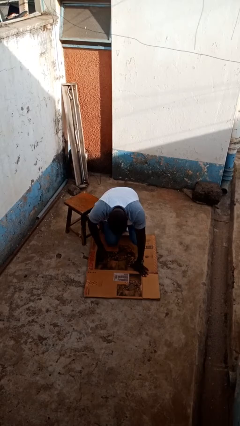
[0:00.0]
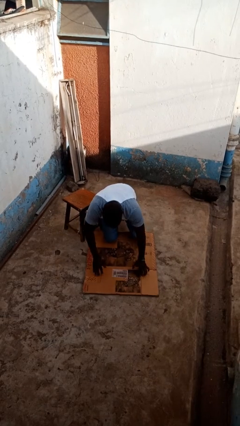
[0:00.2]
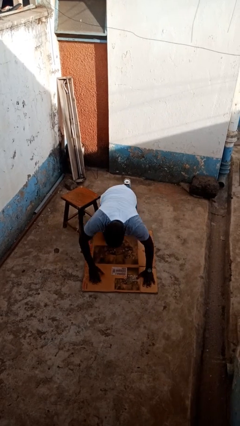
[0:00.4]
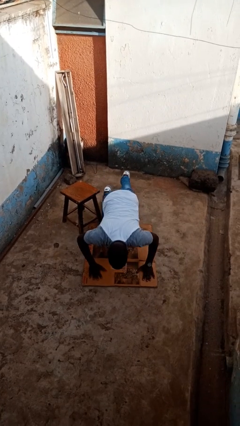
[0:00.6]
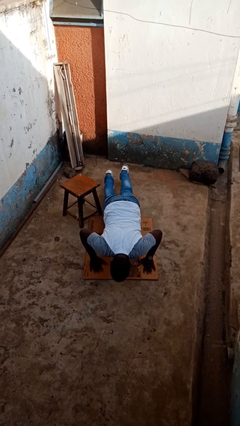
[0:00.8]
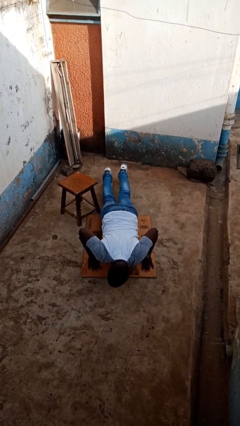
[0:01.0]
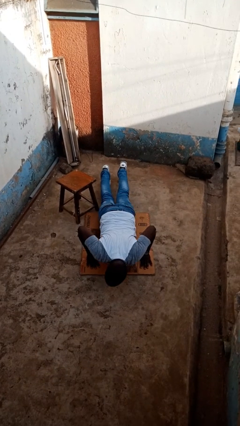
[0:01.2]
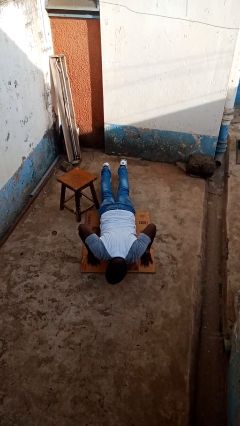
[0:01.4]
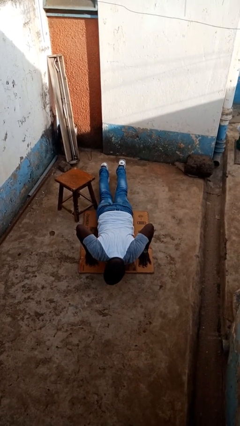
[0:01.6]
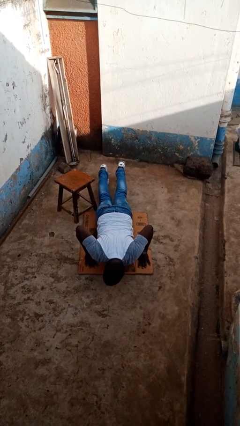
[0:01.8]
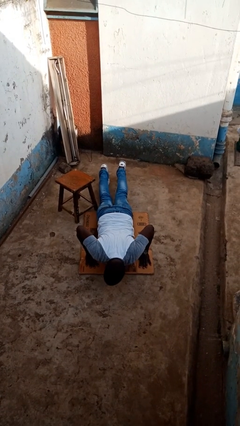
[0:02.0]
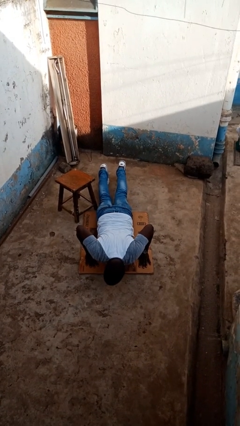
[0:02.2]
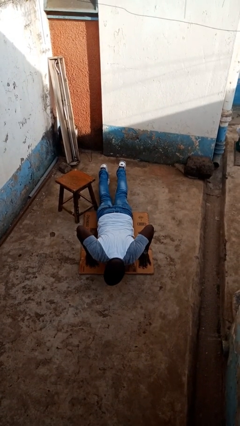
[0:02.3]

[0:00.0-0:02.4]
person lies down on floor

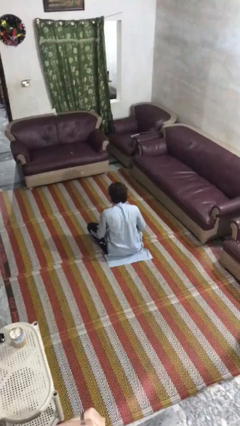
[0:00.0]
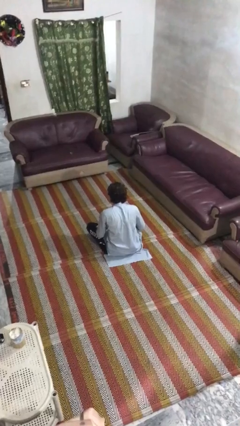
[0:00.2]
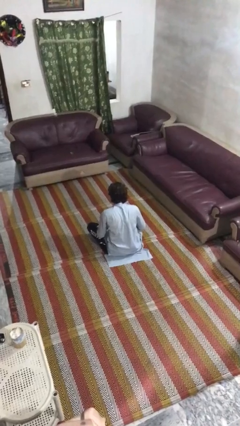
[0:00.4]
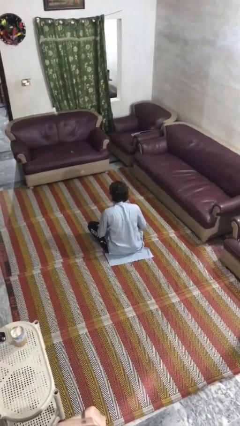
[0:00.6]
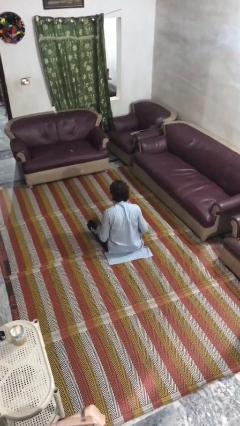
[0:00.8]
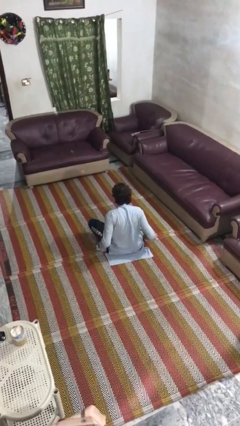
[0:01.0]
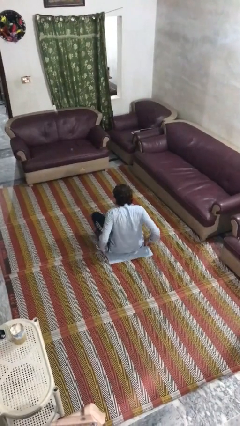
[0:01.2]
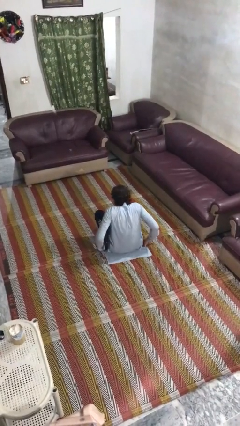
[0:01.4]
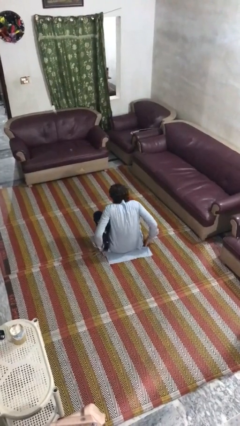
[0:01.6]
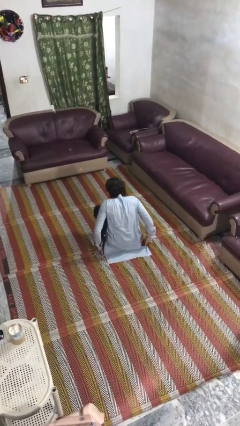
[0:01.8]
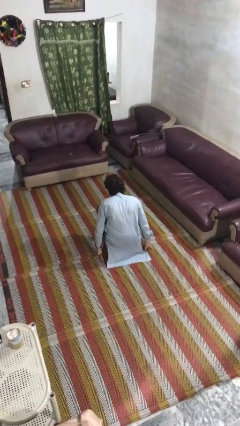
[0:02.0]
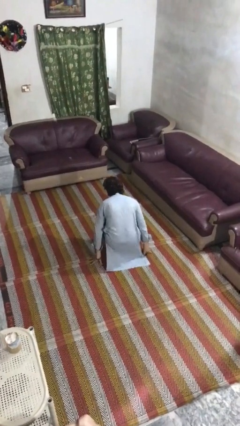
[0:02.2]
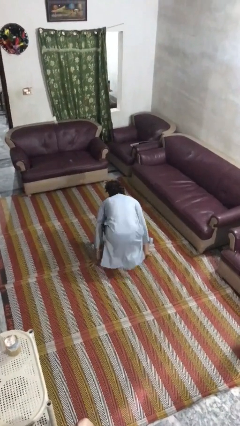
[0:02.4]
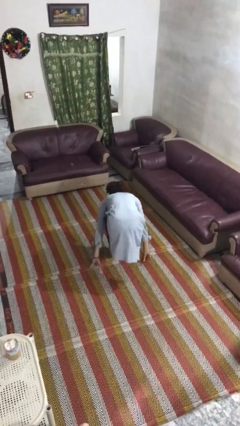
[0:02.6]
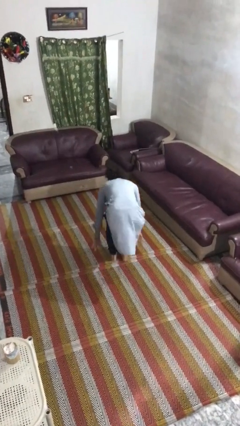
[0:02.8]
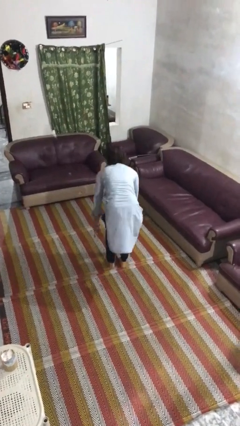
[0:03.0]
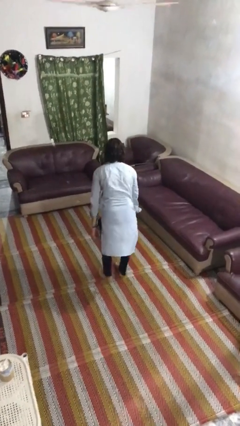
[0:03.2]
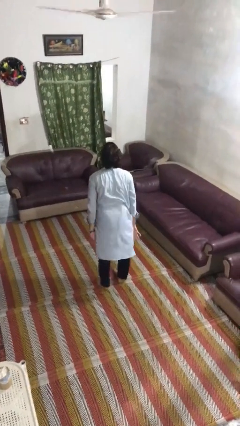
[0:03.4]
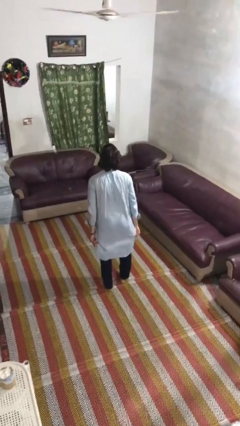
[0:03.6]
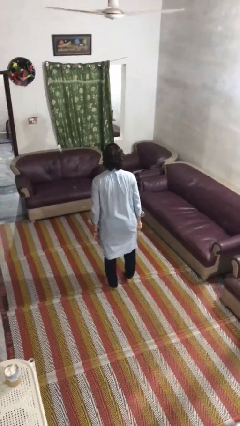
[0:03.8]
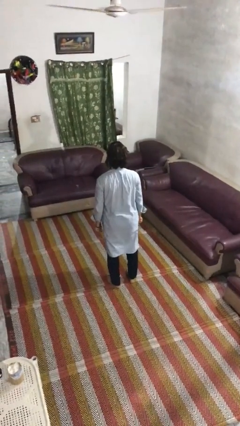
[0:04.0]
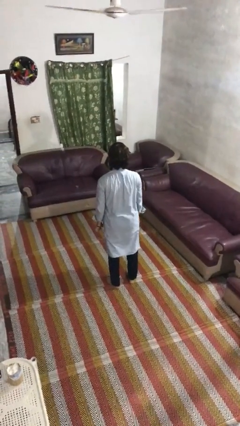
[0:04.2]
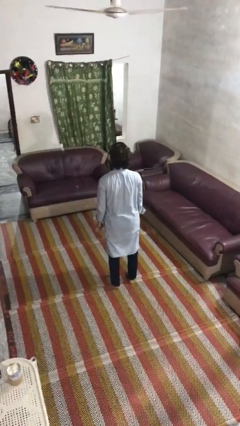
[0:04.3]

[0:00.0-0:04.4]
person stands up from floor

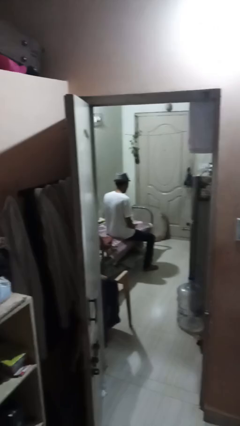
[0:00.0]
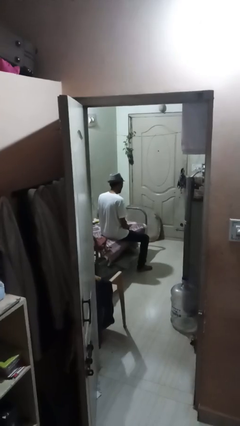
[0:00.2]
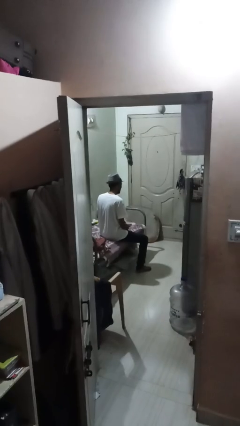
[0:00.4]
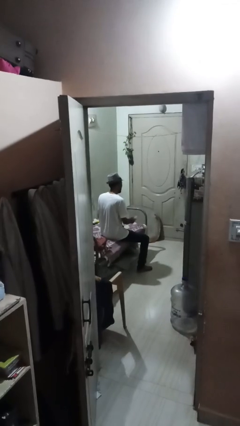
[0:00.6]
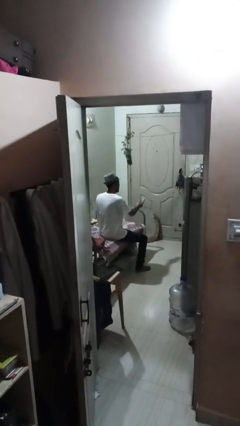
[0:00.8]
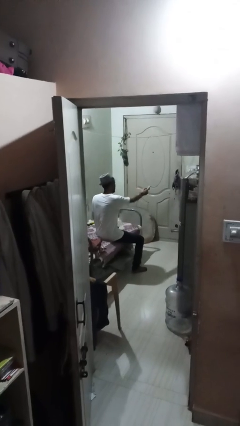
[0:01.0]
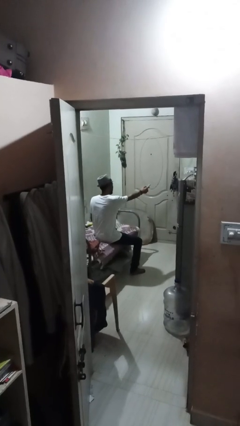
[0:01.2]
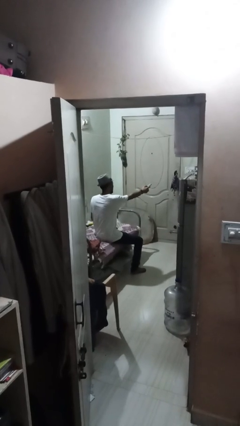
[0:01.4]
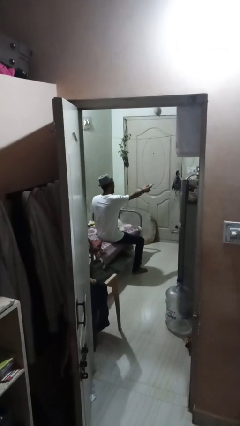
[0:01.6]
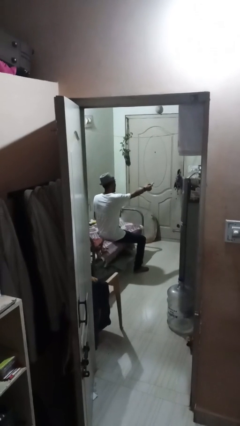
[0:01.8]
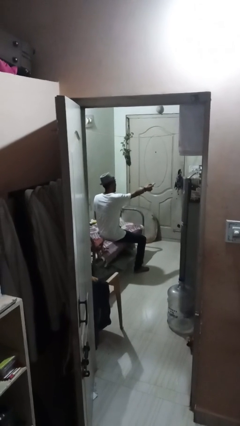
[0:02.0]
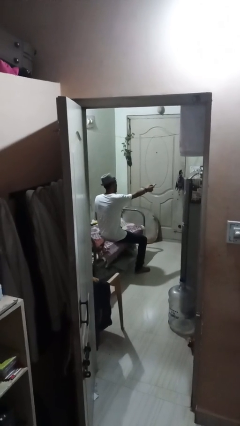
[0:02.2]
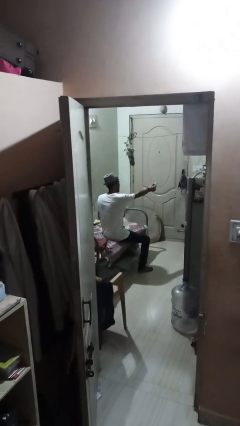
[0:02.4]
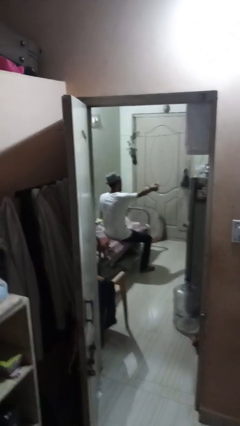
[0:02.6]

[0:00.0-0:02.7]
person uses television remote

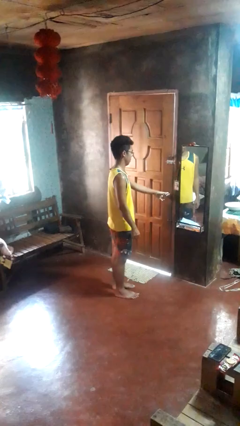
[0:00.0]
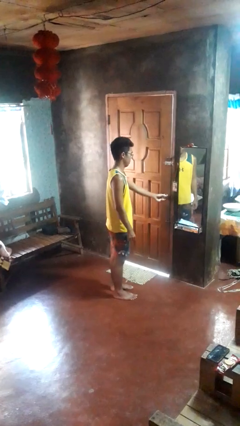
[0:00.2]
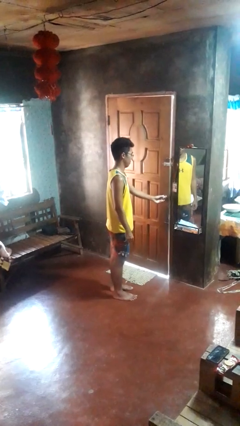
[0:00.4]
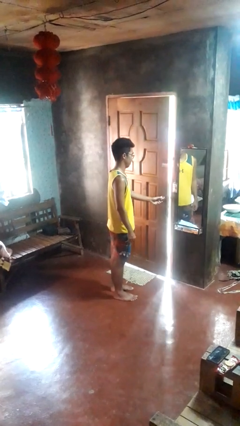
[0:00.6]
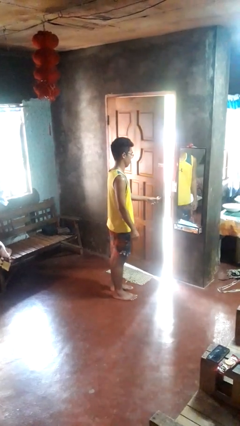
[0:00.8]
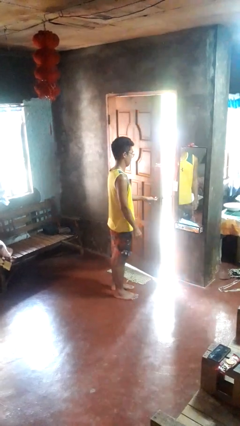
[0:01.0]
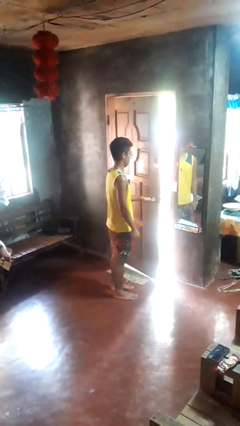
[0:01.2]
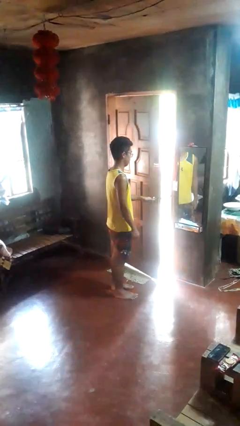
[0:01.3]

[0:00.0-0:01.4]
person opens facility door

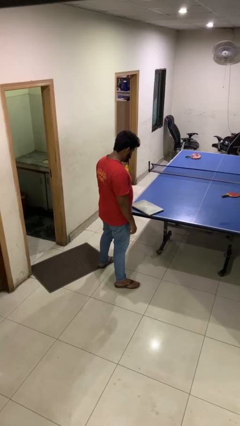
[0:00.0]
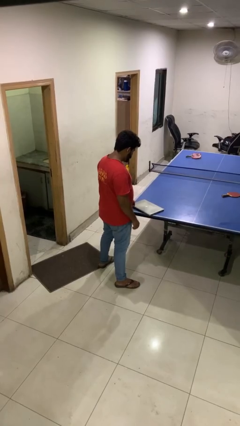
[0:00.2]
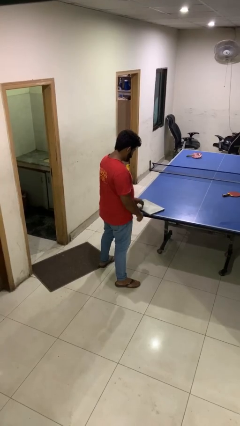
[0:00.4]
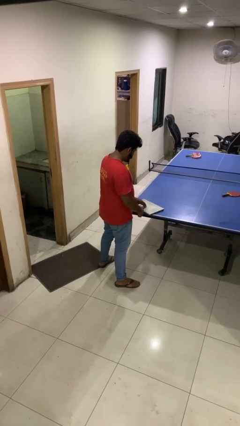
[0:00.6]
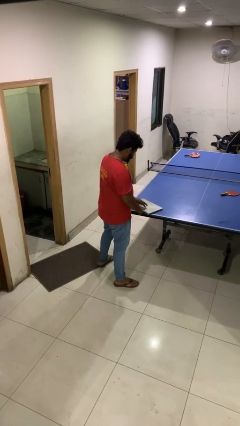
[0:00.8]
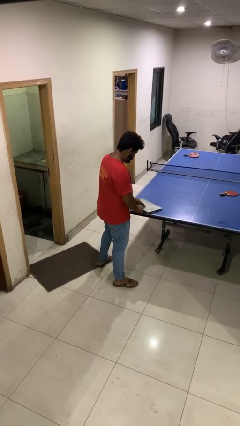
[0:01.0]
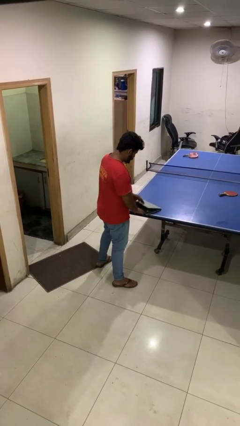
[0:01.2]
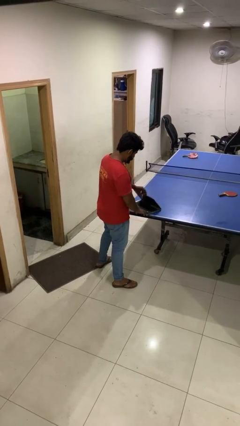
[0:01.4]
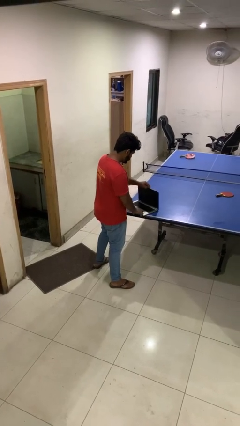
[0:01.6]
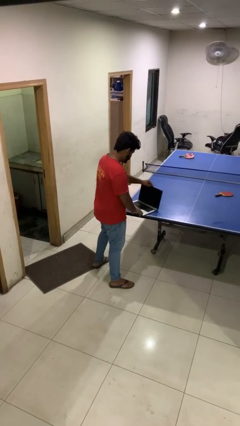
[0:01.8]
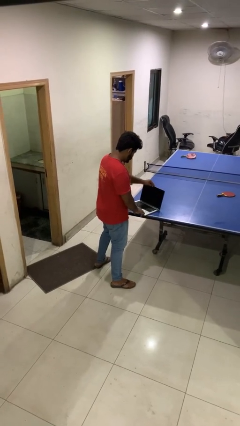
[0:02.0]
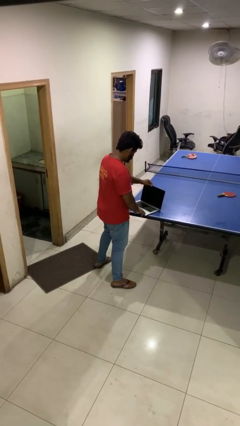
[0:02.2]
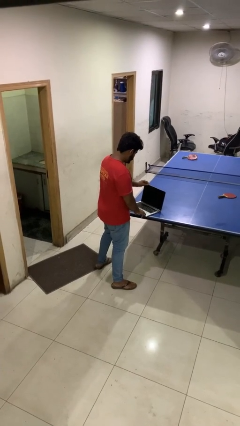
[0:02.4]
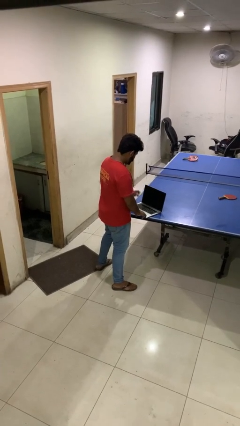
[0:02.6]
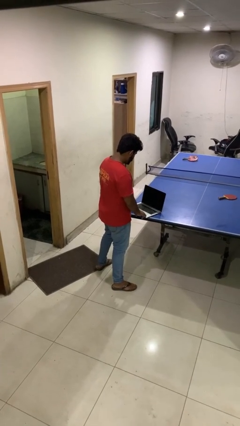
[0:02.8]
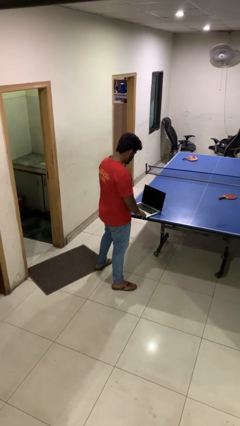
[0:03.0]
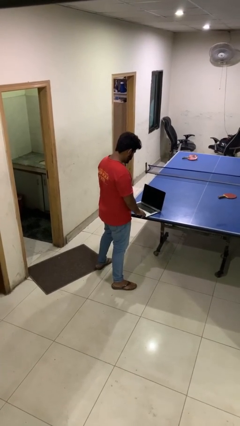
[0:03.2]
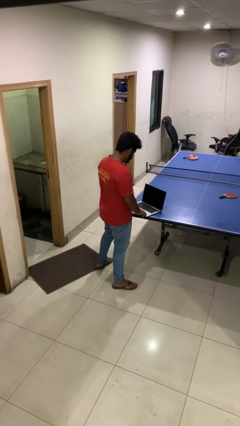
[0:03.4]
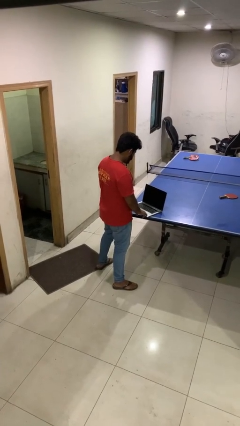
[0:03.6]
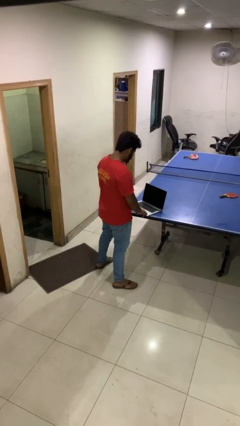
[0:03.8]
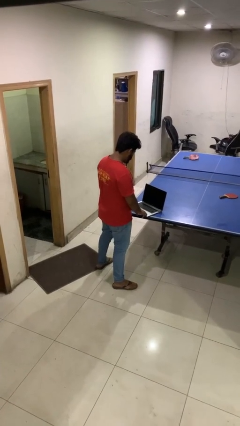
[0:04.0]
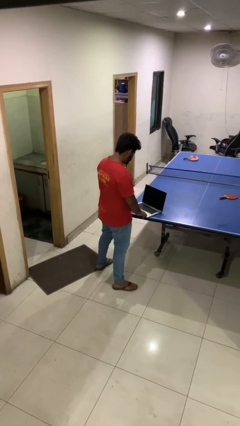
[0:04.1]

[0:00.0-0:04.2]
person opens laptop

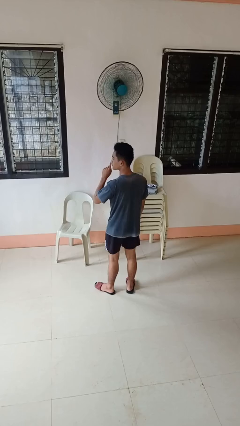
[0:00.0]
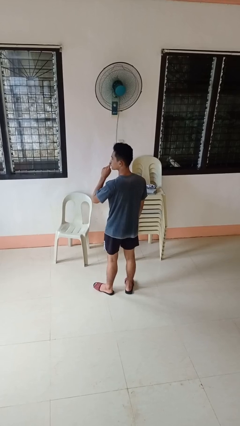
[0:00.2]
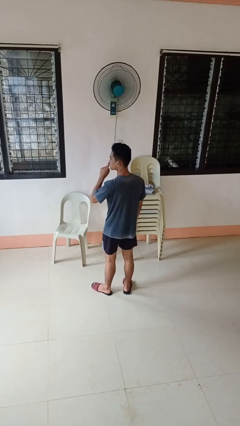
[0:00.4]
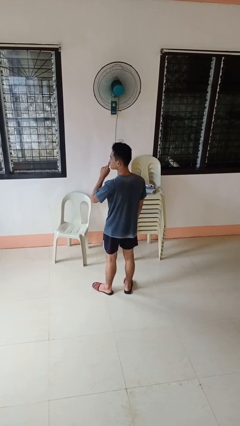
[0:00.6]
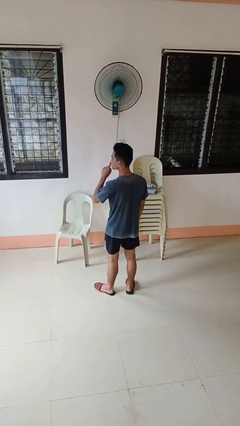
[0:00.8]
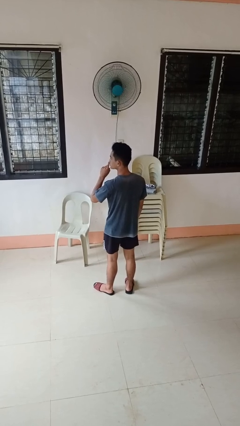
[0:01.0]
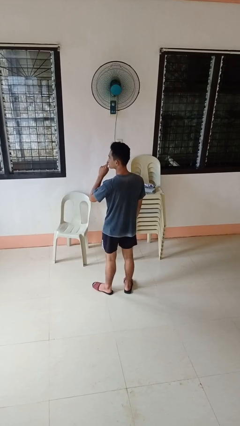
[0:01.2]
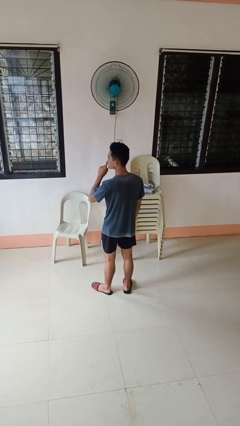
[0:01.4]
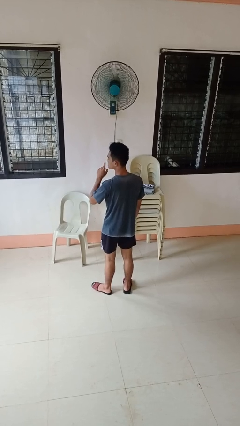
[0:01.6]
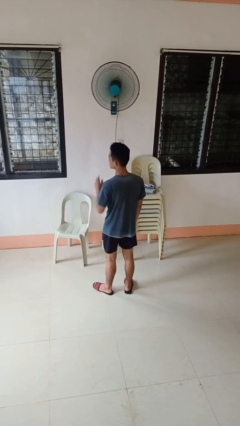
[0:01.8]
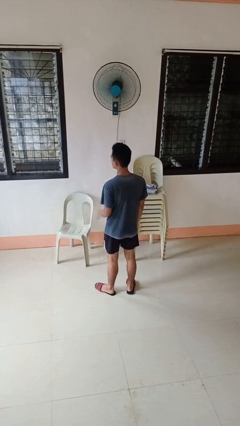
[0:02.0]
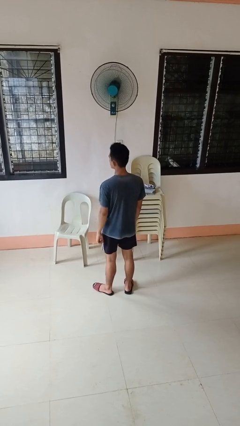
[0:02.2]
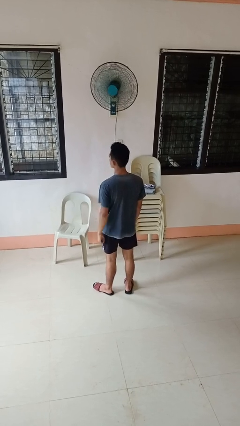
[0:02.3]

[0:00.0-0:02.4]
person gestures be quiet
